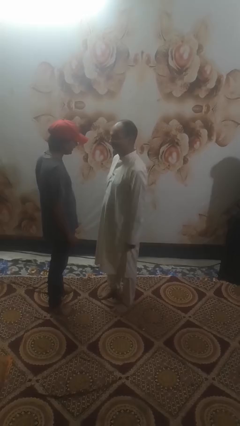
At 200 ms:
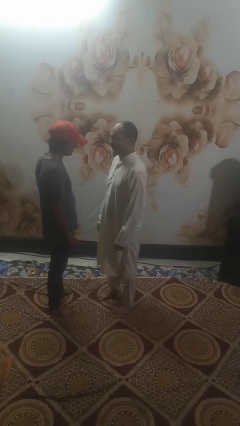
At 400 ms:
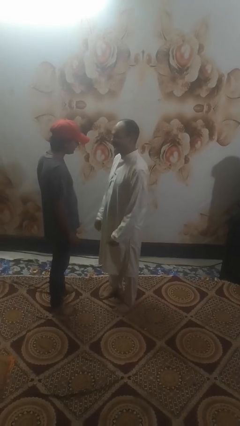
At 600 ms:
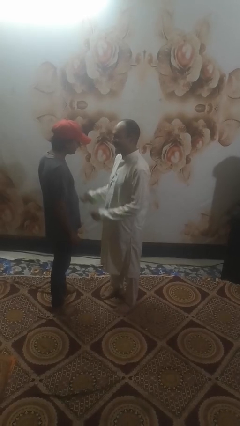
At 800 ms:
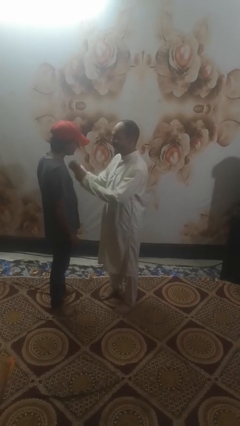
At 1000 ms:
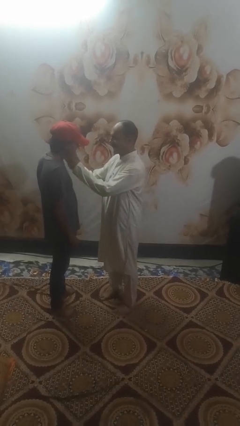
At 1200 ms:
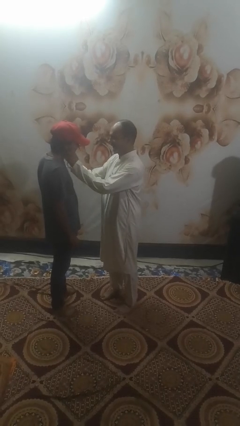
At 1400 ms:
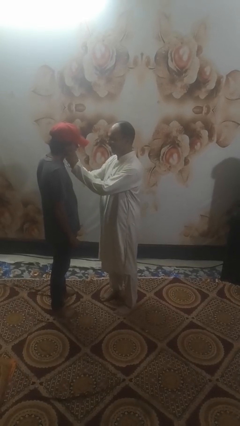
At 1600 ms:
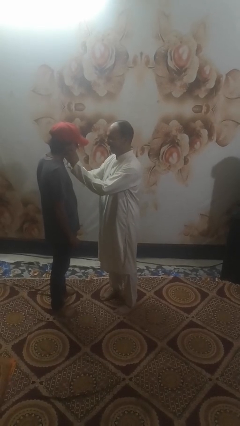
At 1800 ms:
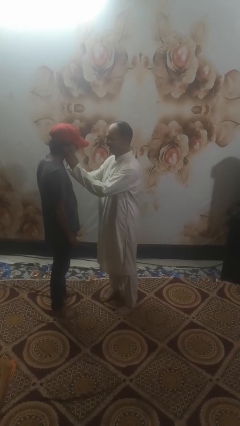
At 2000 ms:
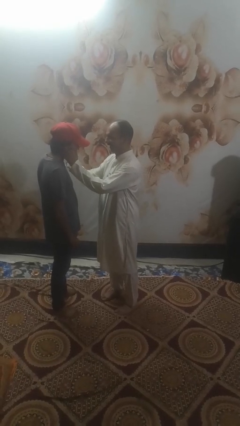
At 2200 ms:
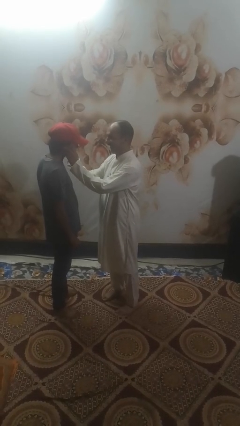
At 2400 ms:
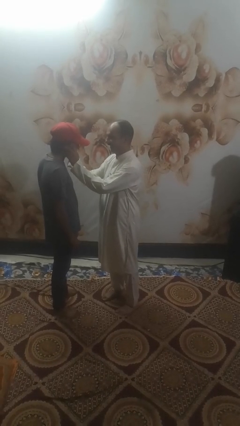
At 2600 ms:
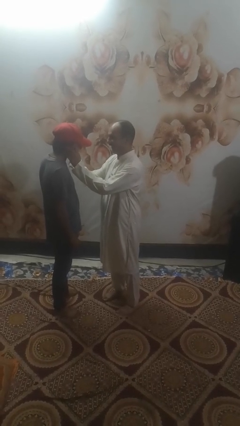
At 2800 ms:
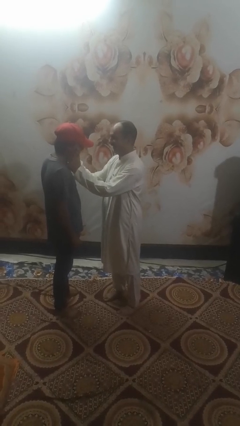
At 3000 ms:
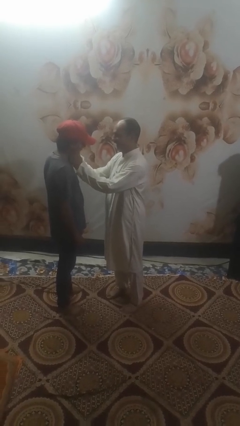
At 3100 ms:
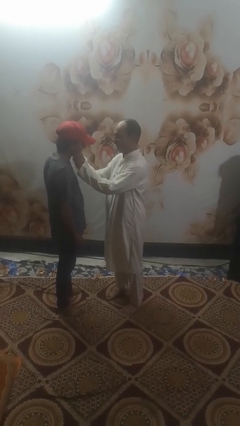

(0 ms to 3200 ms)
person touches face of person

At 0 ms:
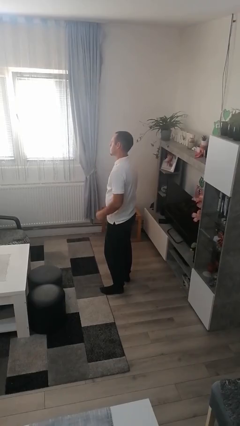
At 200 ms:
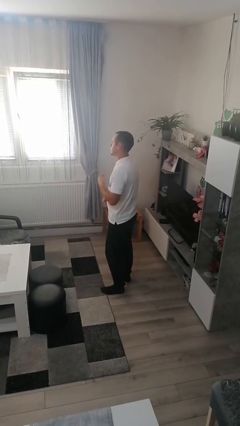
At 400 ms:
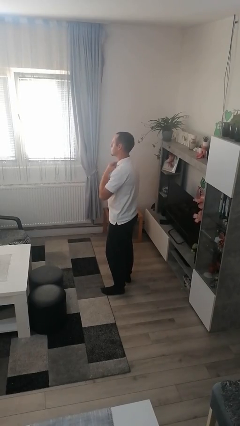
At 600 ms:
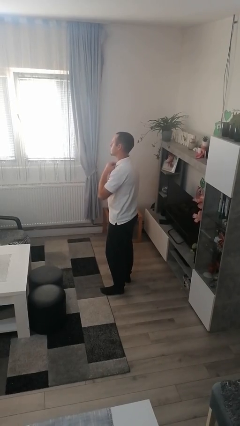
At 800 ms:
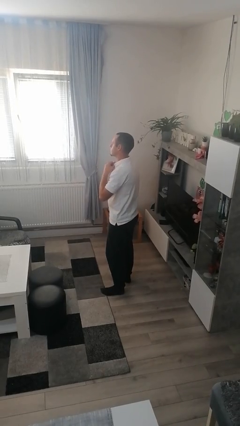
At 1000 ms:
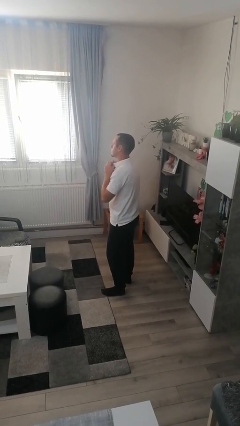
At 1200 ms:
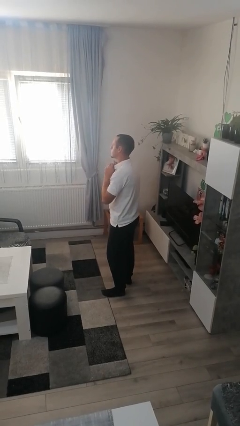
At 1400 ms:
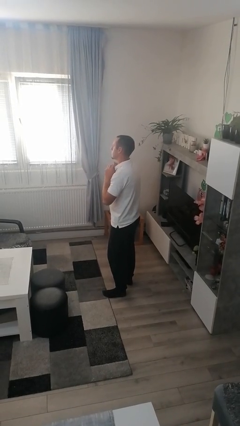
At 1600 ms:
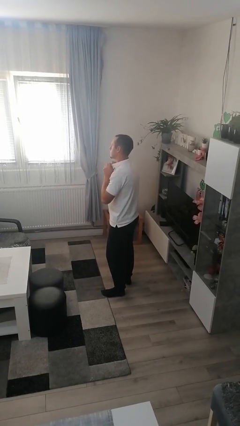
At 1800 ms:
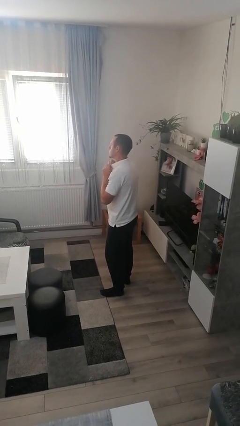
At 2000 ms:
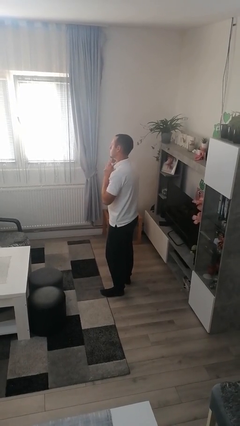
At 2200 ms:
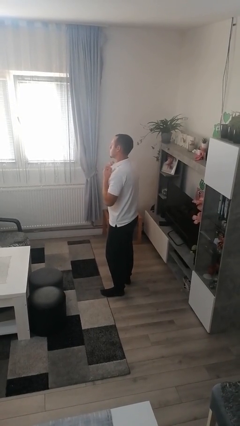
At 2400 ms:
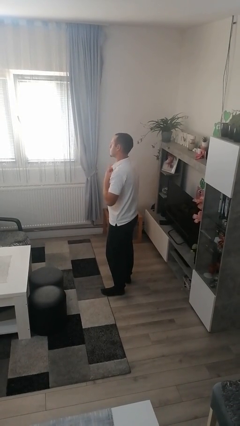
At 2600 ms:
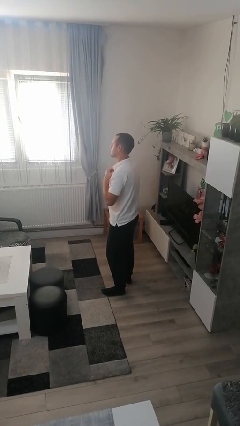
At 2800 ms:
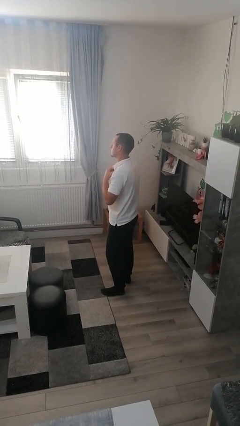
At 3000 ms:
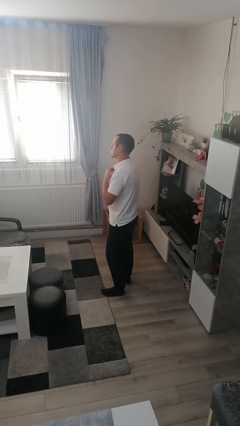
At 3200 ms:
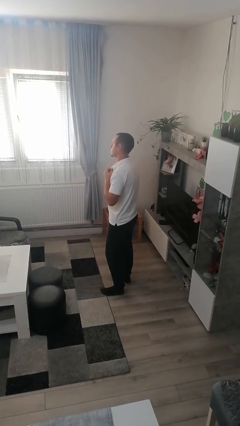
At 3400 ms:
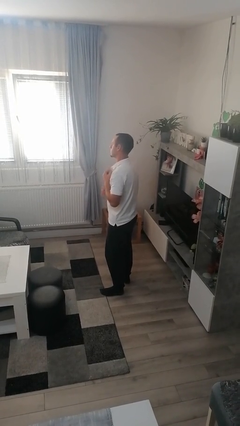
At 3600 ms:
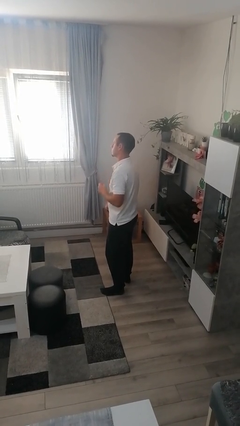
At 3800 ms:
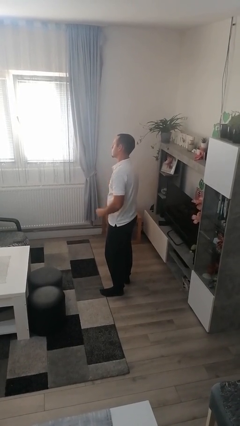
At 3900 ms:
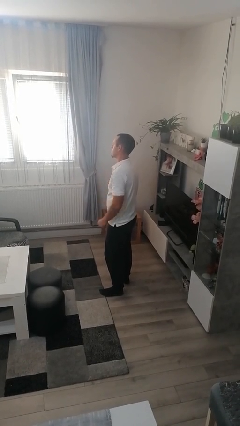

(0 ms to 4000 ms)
person unbuttons shirt

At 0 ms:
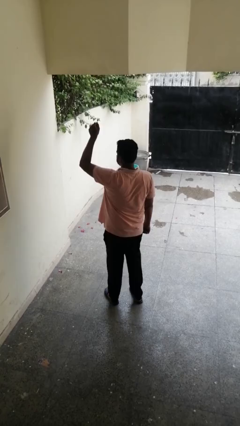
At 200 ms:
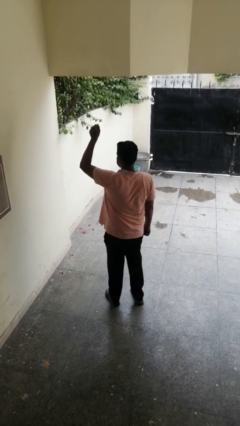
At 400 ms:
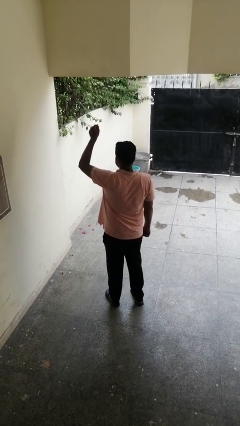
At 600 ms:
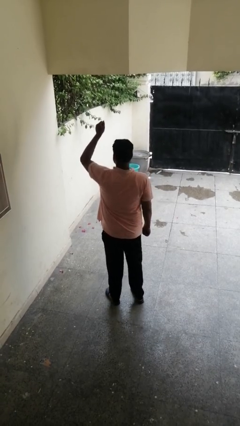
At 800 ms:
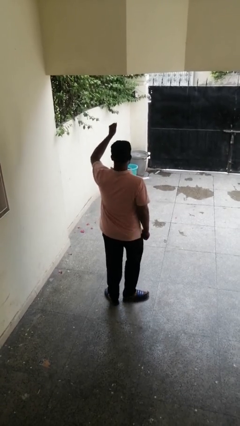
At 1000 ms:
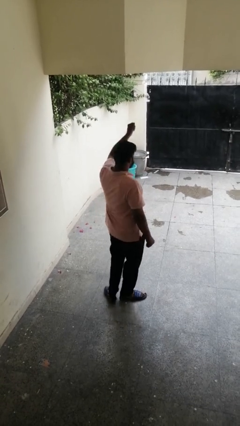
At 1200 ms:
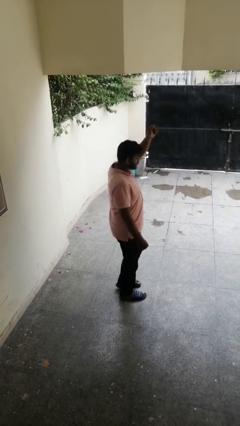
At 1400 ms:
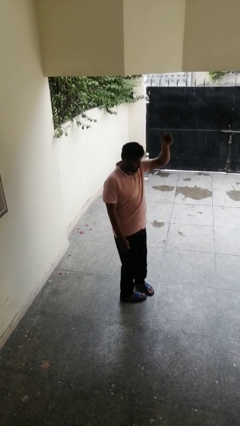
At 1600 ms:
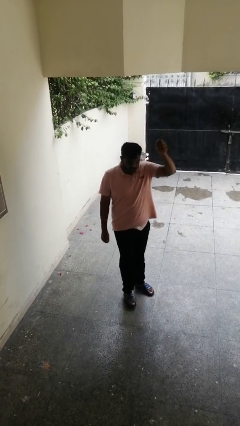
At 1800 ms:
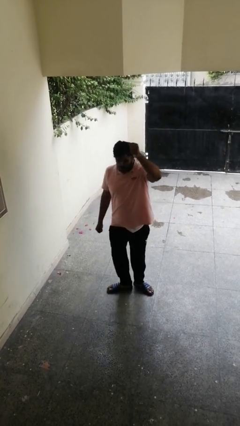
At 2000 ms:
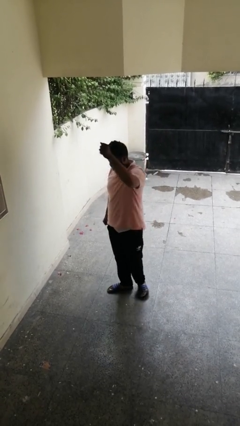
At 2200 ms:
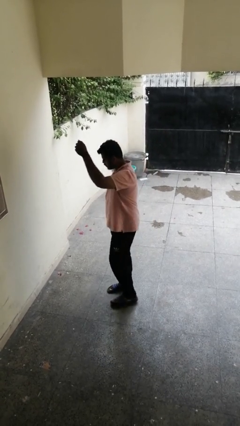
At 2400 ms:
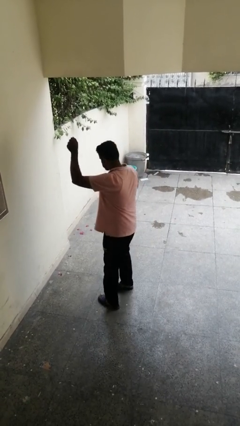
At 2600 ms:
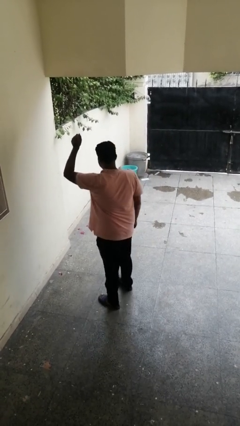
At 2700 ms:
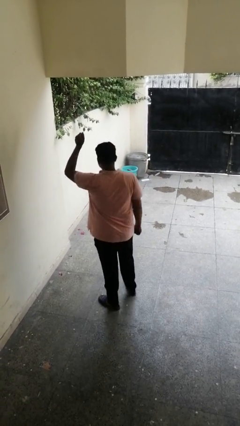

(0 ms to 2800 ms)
person twirls

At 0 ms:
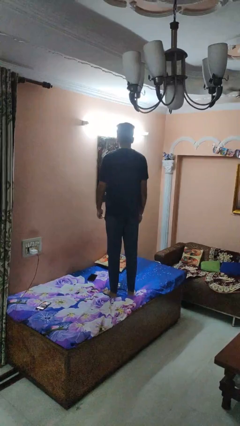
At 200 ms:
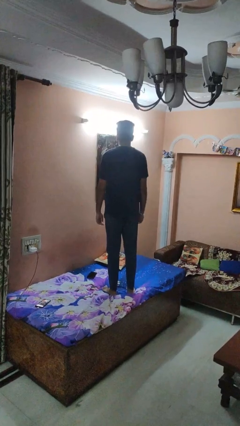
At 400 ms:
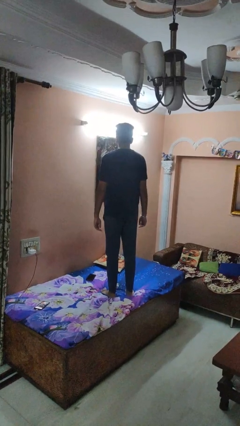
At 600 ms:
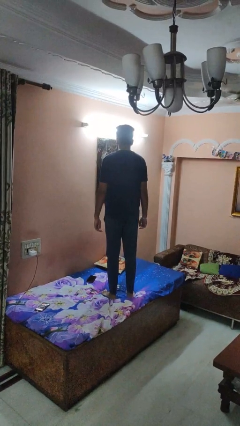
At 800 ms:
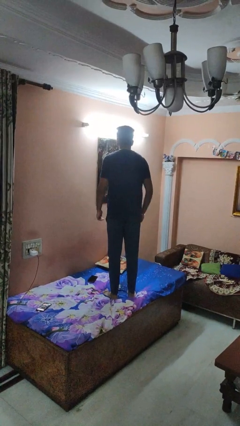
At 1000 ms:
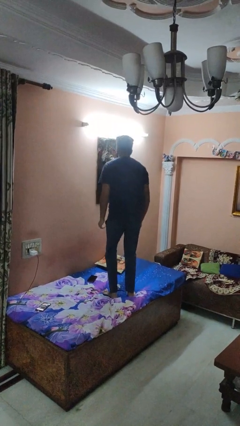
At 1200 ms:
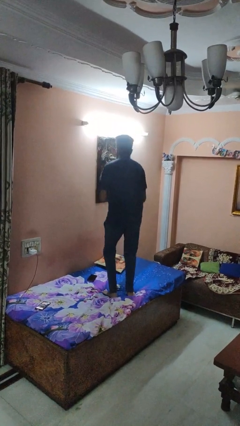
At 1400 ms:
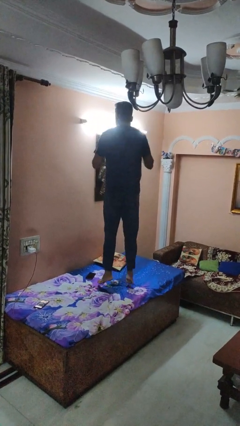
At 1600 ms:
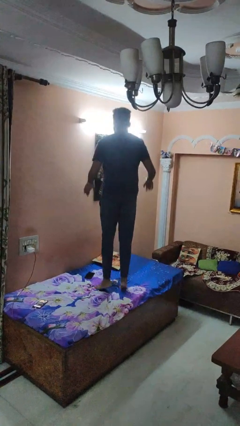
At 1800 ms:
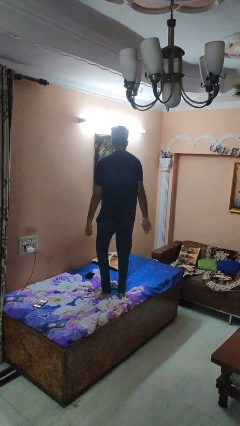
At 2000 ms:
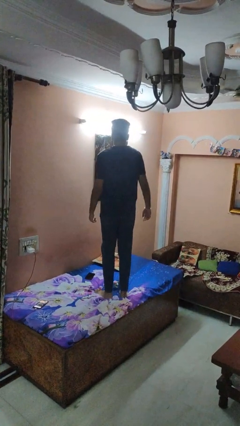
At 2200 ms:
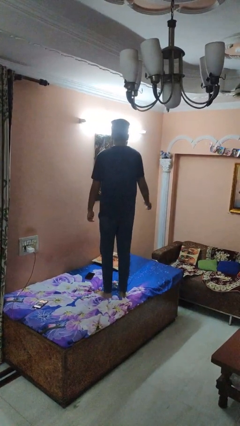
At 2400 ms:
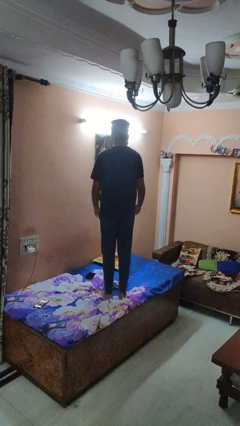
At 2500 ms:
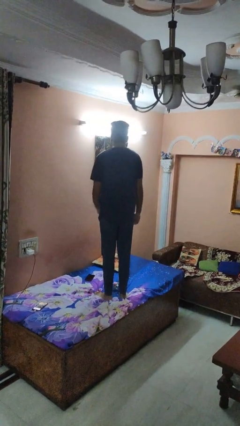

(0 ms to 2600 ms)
person jumps on bed

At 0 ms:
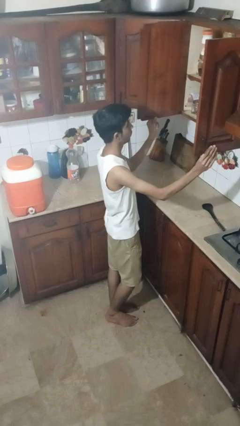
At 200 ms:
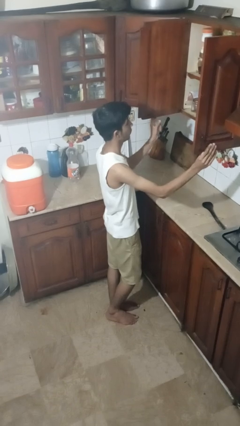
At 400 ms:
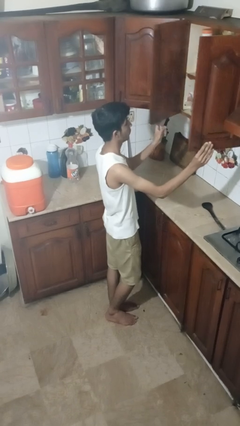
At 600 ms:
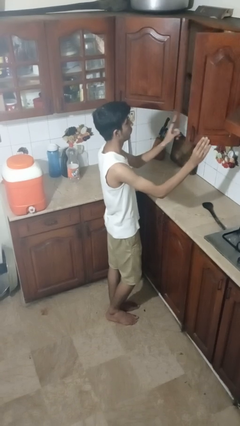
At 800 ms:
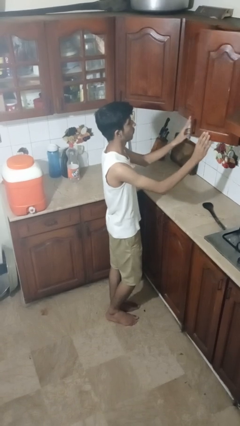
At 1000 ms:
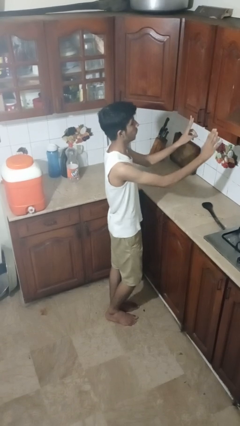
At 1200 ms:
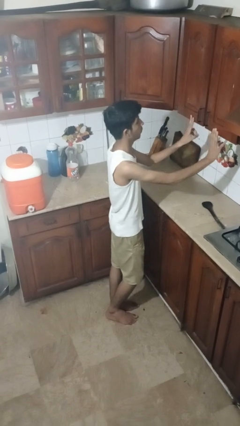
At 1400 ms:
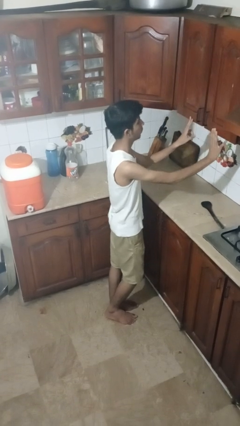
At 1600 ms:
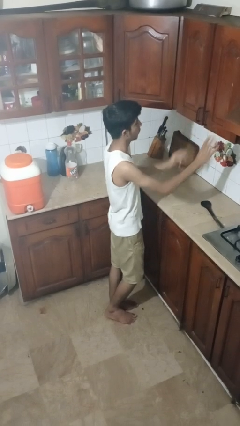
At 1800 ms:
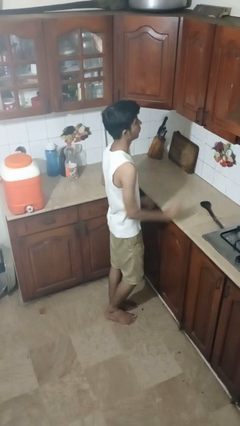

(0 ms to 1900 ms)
person closes cabinet

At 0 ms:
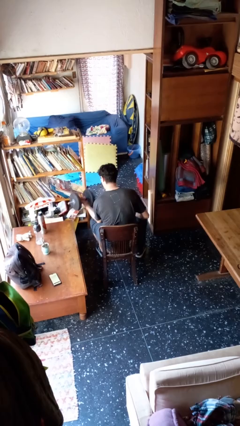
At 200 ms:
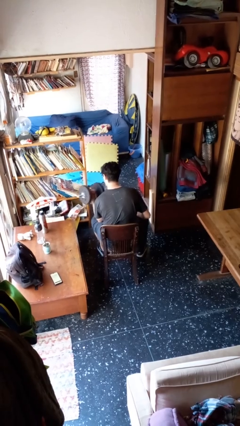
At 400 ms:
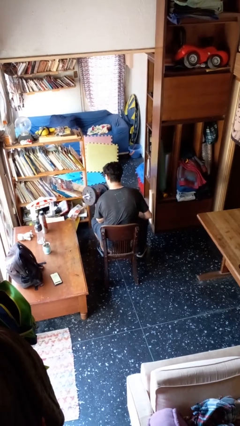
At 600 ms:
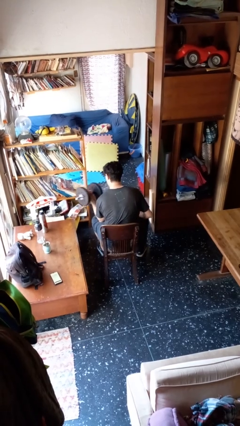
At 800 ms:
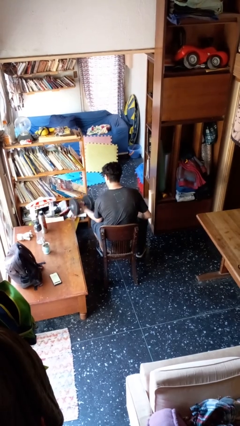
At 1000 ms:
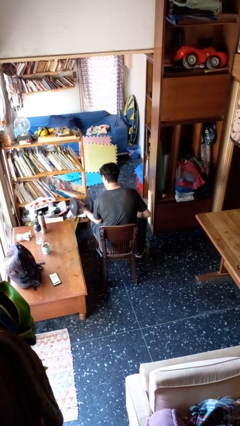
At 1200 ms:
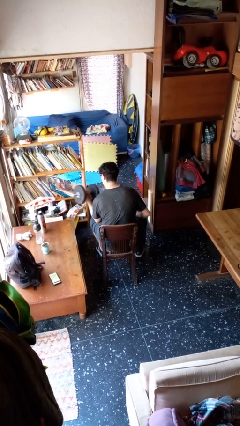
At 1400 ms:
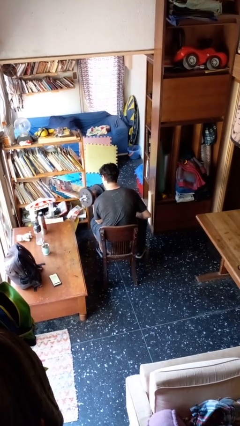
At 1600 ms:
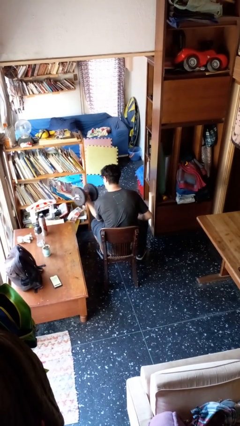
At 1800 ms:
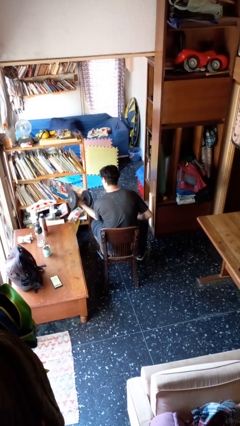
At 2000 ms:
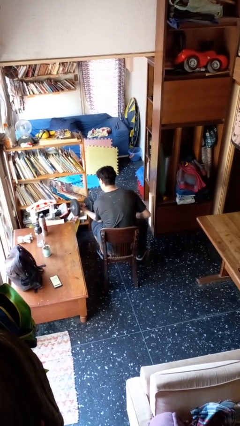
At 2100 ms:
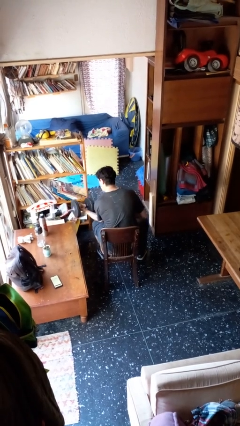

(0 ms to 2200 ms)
person lifts dumbbells

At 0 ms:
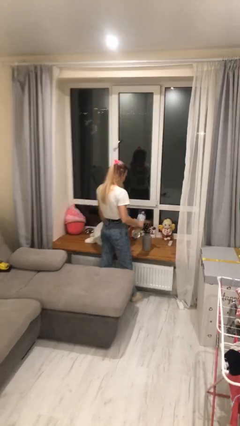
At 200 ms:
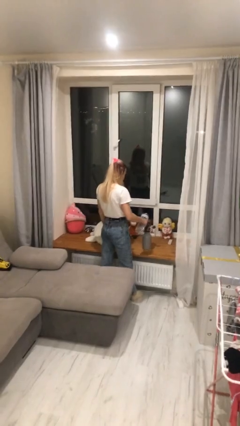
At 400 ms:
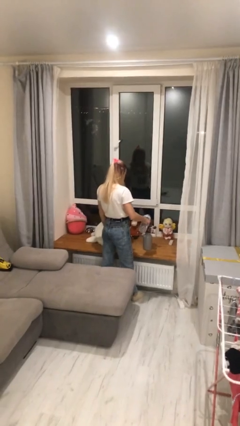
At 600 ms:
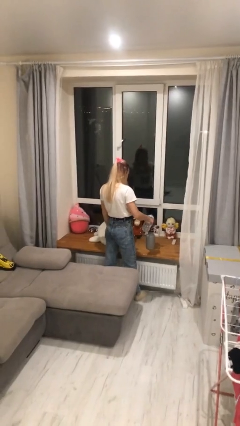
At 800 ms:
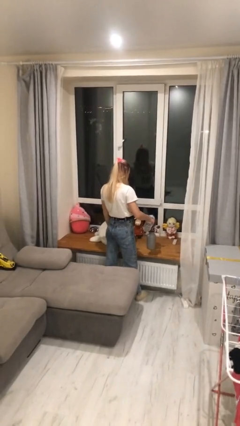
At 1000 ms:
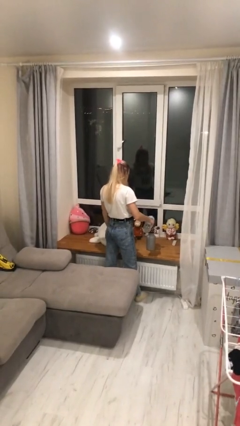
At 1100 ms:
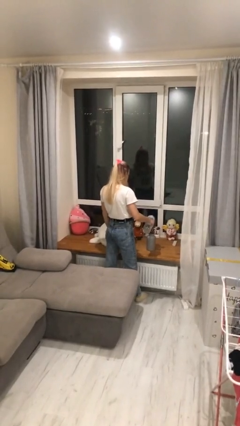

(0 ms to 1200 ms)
person waters houseplant
